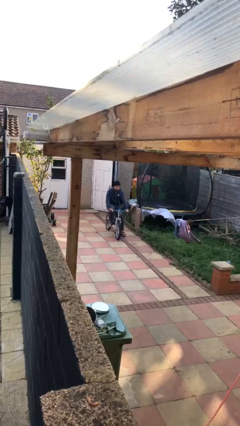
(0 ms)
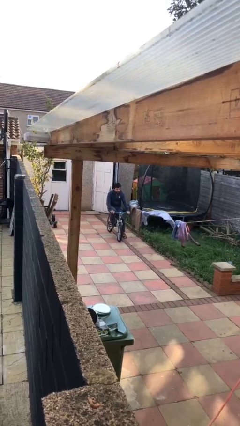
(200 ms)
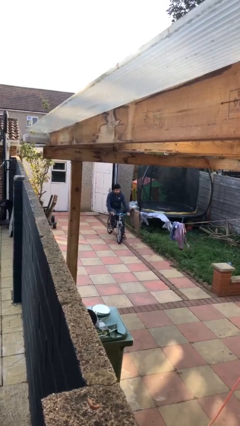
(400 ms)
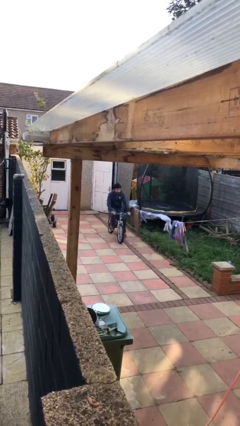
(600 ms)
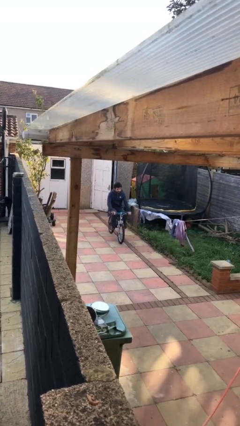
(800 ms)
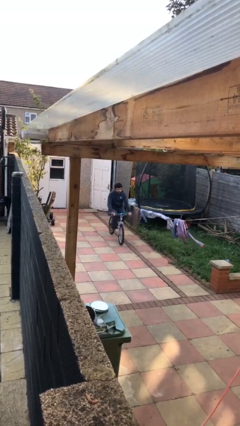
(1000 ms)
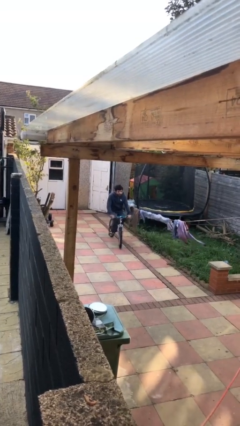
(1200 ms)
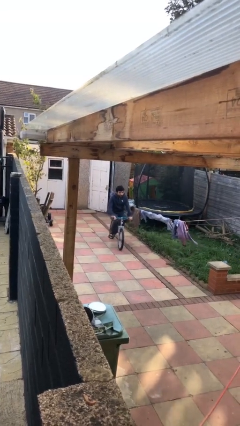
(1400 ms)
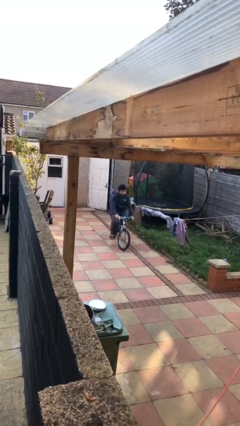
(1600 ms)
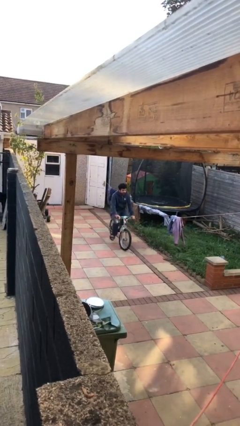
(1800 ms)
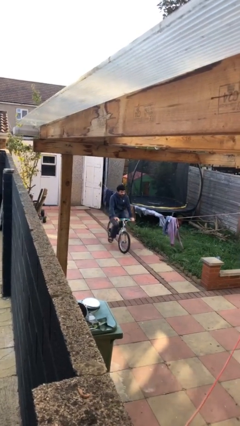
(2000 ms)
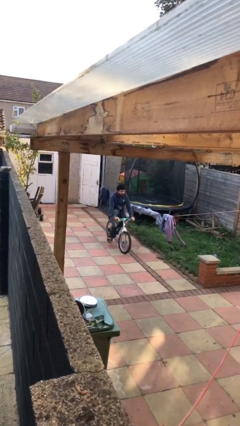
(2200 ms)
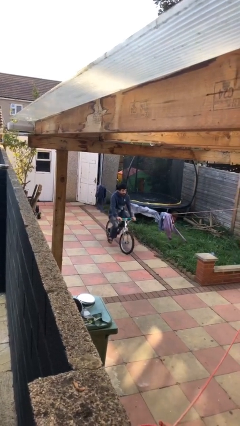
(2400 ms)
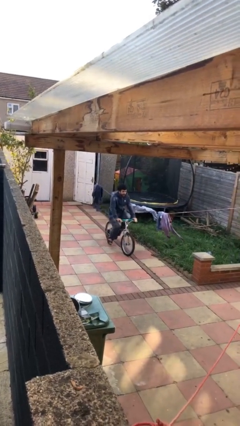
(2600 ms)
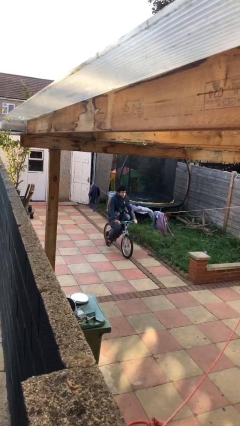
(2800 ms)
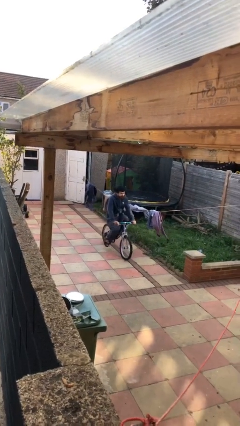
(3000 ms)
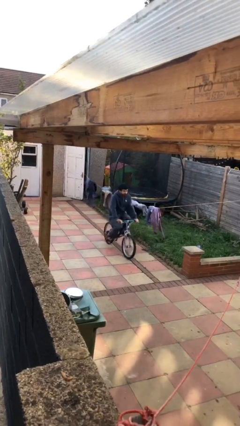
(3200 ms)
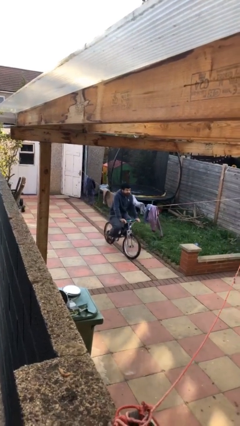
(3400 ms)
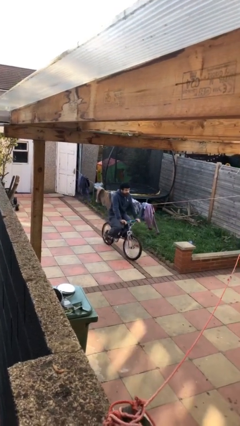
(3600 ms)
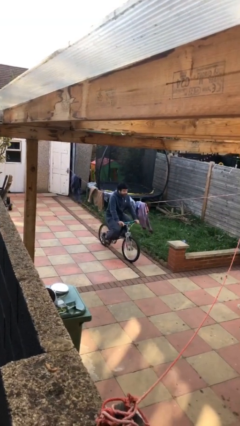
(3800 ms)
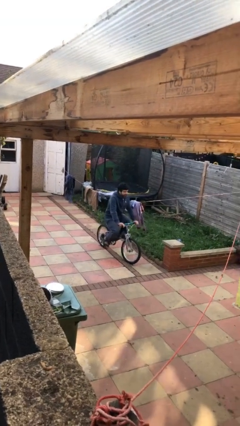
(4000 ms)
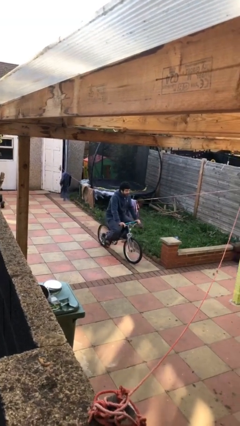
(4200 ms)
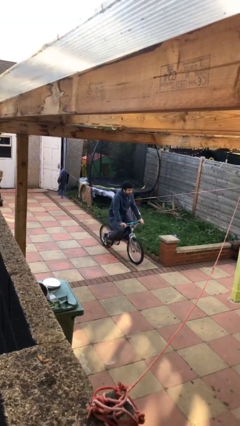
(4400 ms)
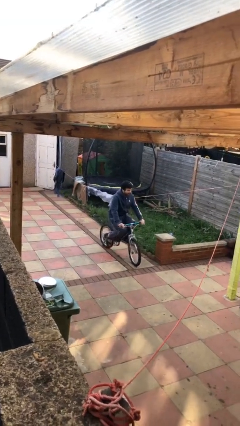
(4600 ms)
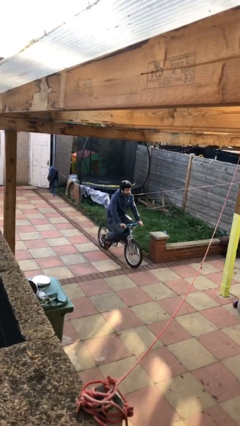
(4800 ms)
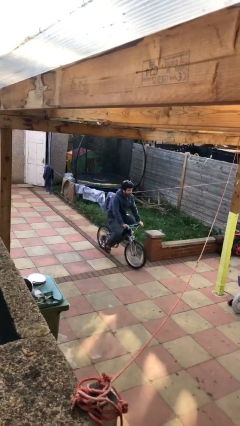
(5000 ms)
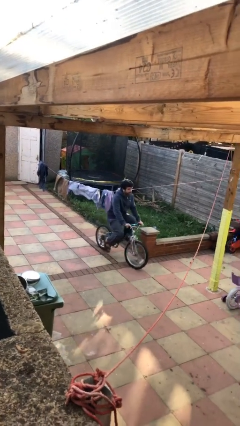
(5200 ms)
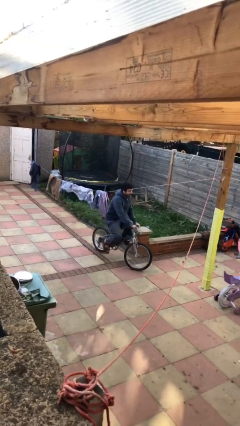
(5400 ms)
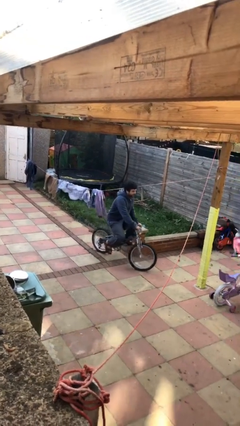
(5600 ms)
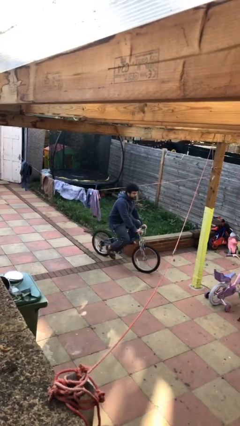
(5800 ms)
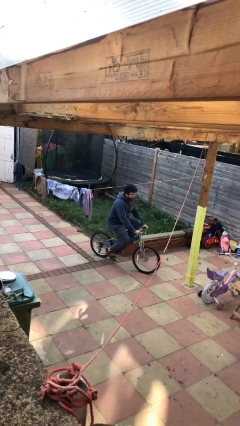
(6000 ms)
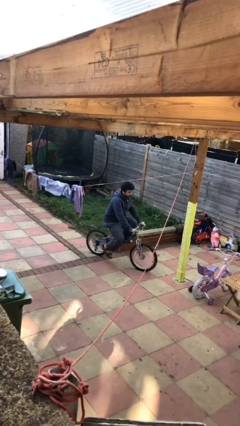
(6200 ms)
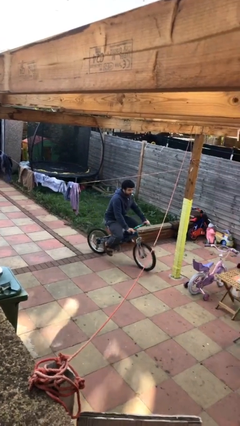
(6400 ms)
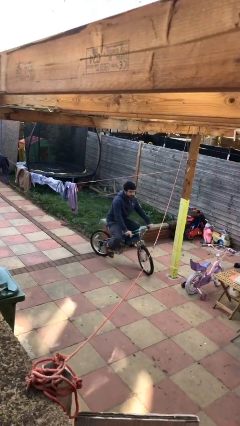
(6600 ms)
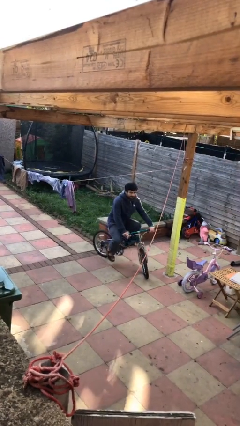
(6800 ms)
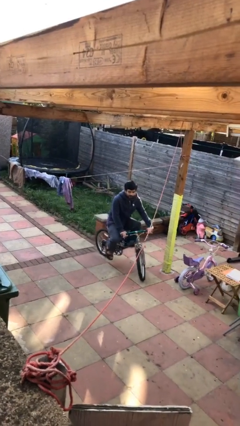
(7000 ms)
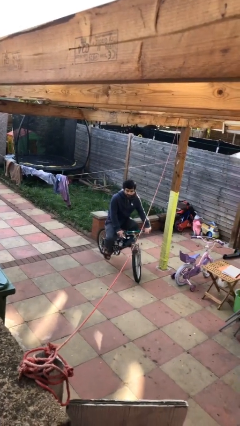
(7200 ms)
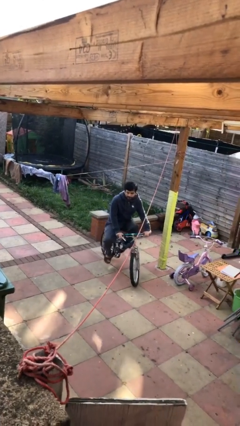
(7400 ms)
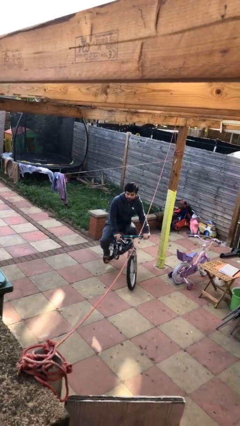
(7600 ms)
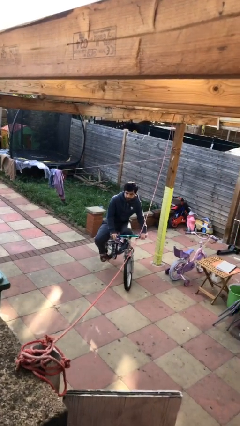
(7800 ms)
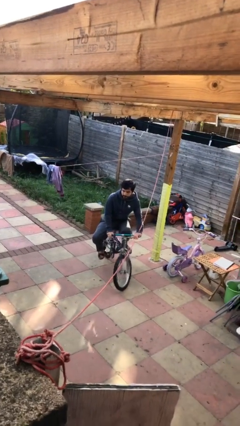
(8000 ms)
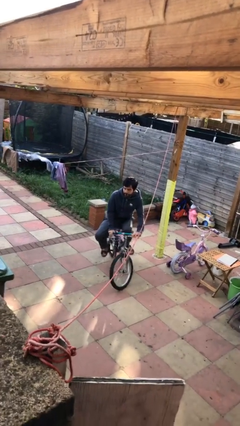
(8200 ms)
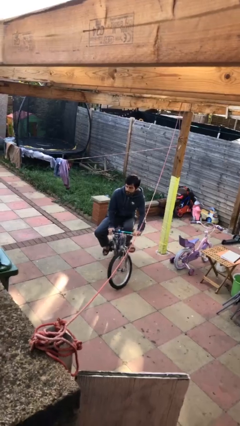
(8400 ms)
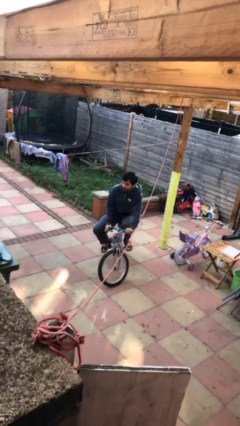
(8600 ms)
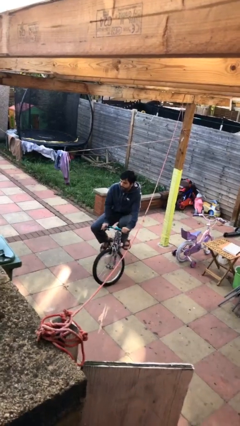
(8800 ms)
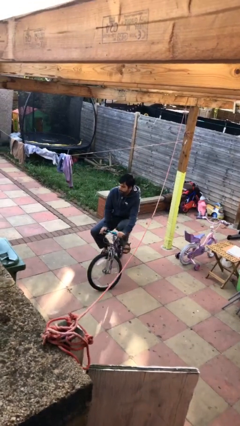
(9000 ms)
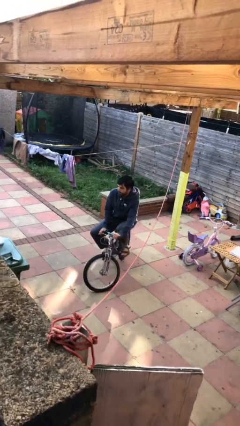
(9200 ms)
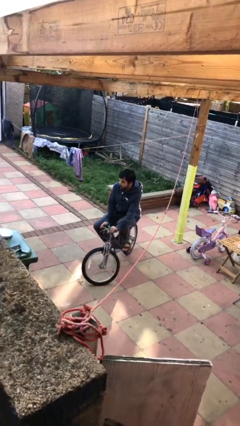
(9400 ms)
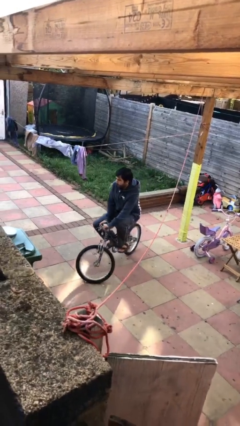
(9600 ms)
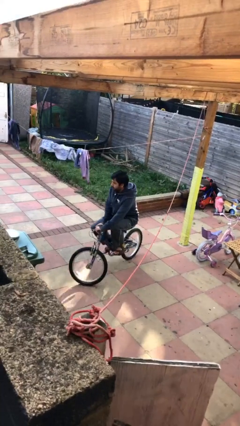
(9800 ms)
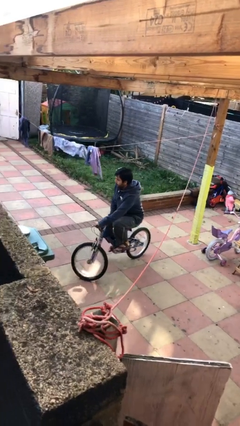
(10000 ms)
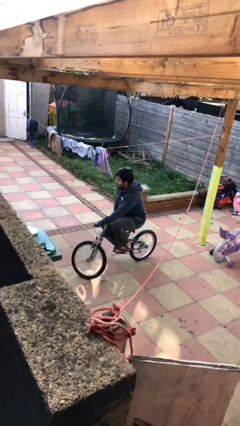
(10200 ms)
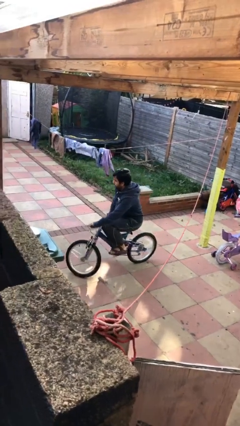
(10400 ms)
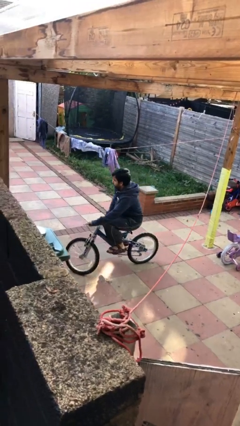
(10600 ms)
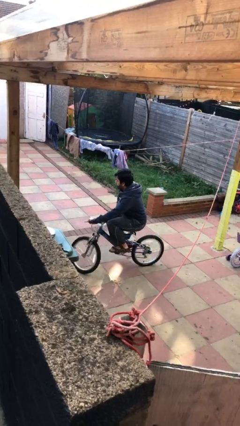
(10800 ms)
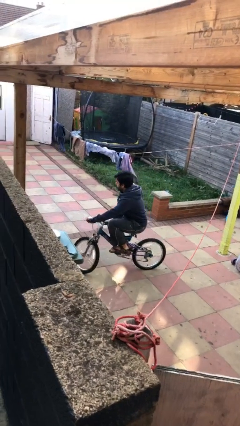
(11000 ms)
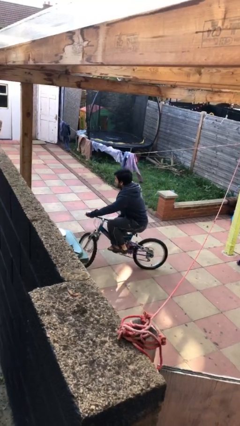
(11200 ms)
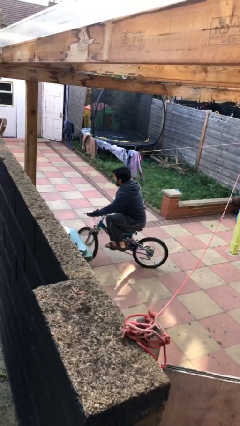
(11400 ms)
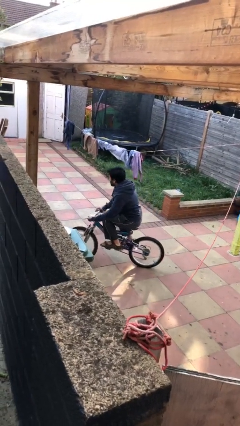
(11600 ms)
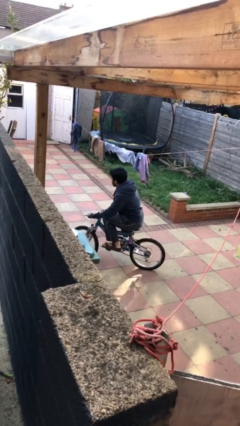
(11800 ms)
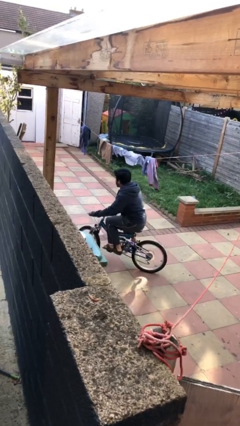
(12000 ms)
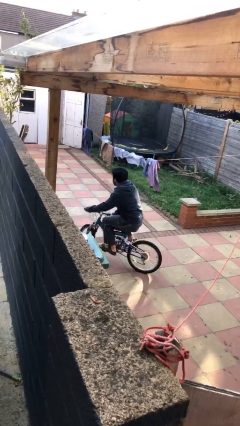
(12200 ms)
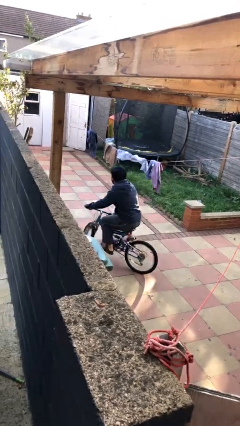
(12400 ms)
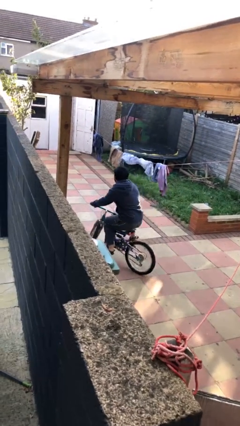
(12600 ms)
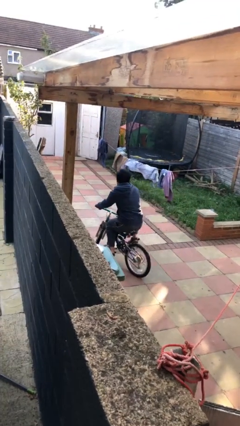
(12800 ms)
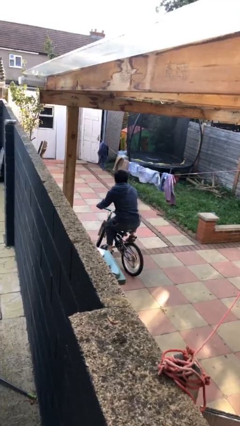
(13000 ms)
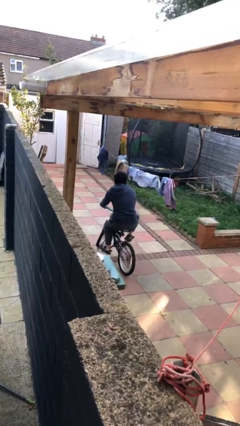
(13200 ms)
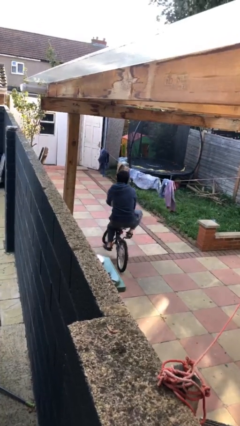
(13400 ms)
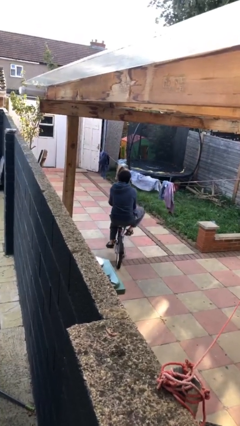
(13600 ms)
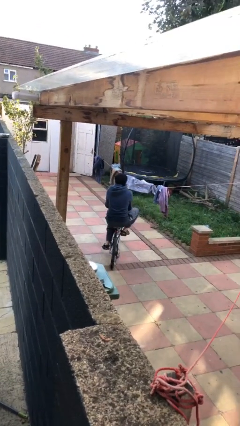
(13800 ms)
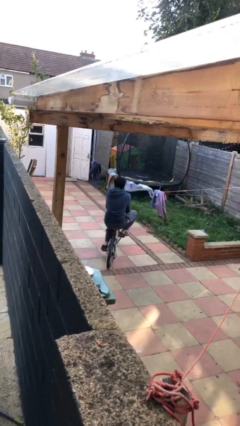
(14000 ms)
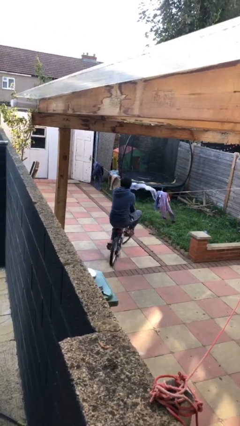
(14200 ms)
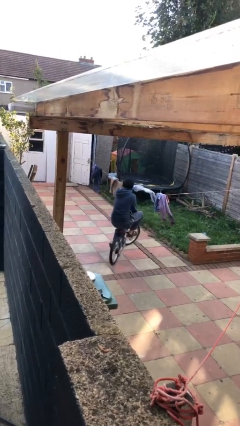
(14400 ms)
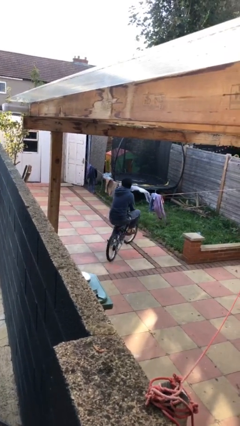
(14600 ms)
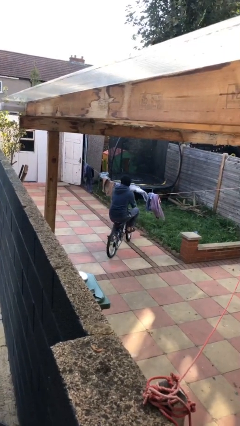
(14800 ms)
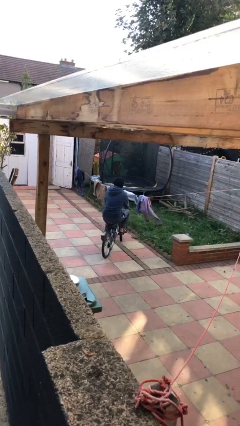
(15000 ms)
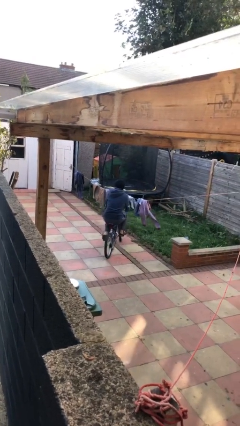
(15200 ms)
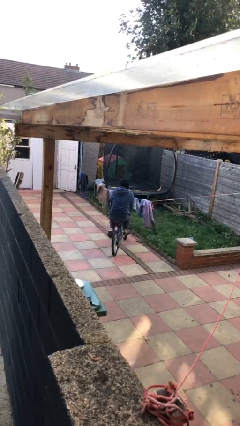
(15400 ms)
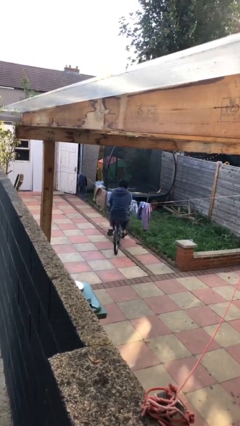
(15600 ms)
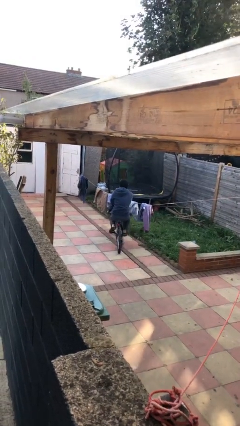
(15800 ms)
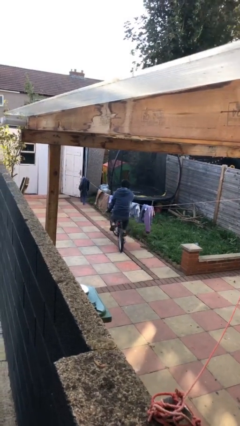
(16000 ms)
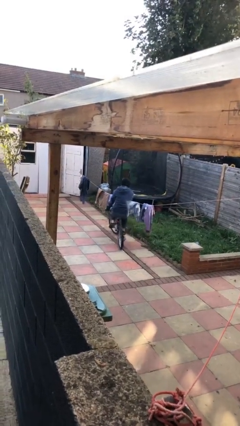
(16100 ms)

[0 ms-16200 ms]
person rides bicycle

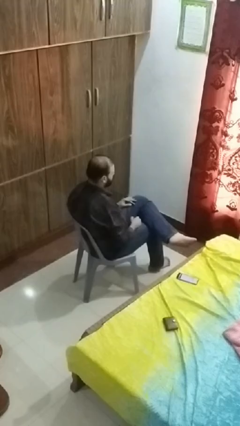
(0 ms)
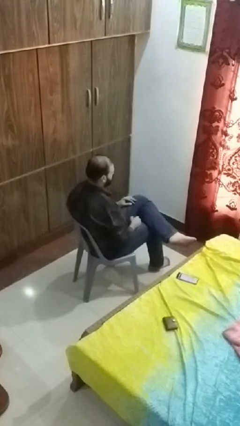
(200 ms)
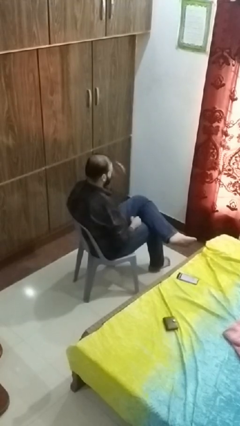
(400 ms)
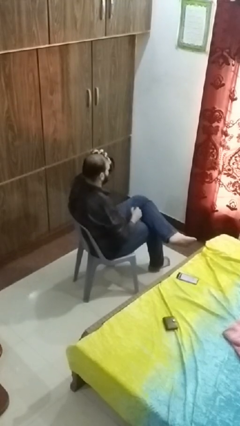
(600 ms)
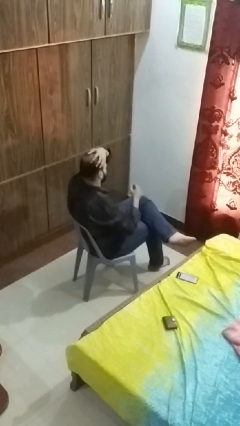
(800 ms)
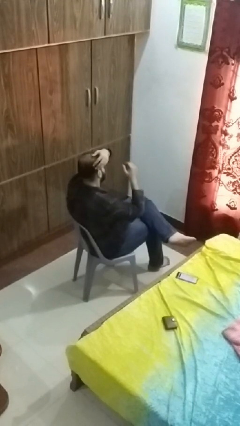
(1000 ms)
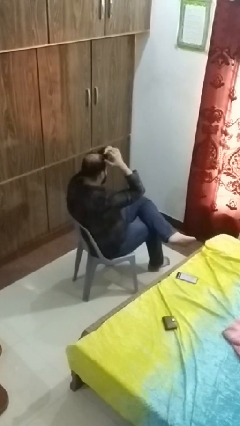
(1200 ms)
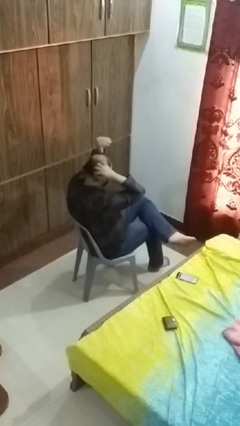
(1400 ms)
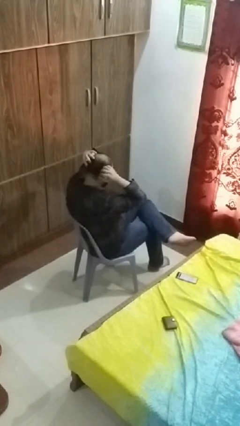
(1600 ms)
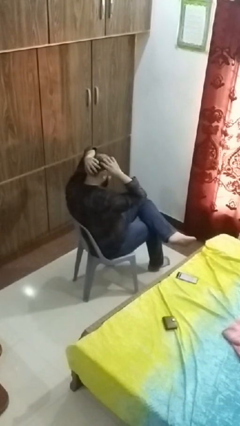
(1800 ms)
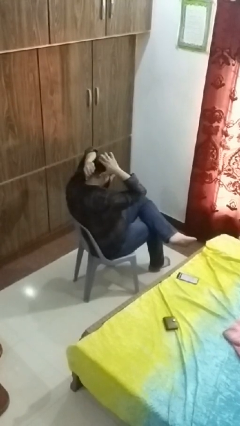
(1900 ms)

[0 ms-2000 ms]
person strokes hair

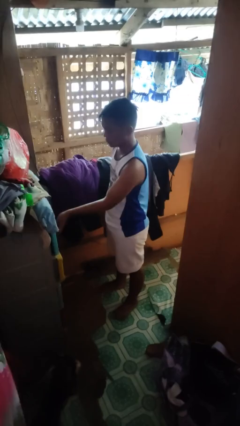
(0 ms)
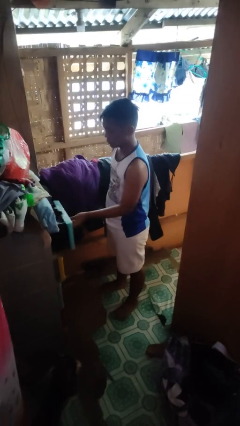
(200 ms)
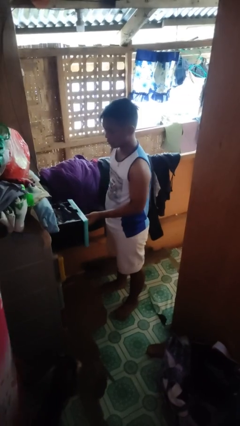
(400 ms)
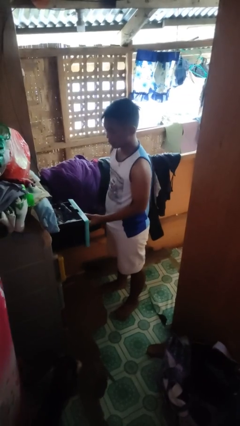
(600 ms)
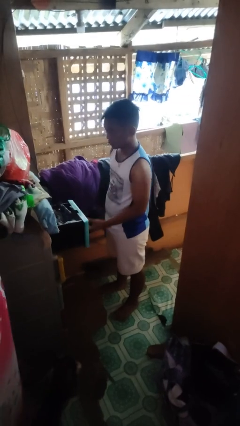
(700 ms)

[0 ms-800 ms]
person opens dresser drawer
